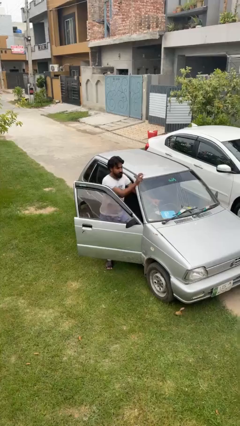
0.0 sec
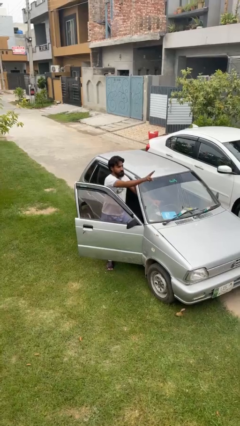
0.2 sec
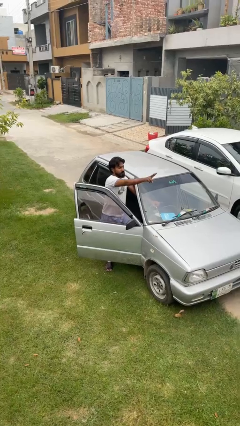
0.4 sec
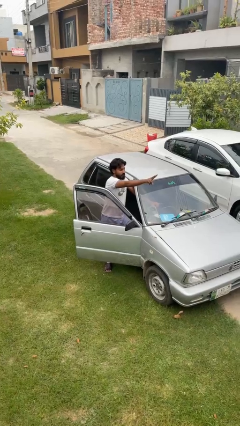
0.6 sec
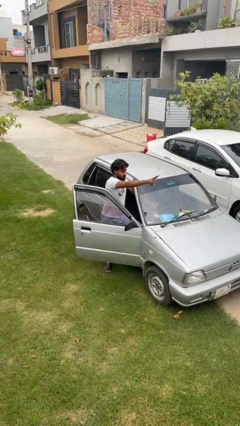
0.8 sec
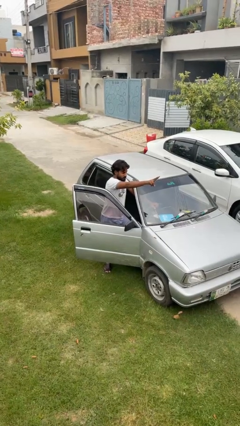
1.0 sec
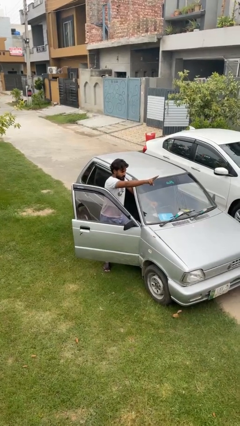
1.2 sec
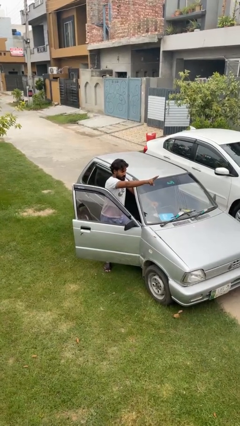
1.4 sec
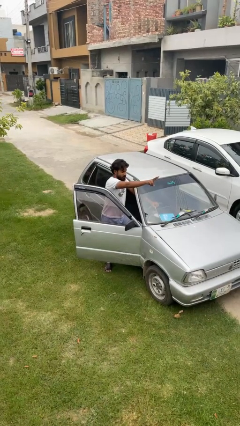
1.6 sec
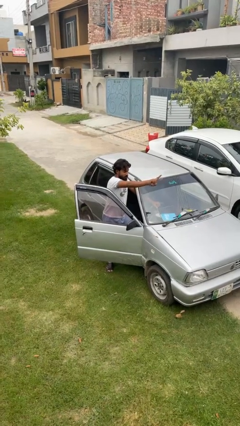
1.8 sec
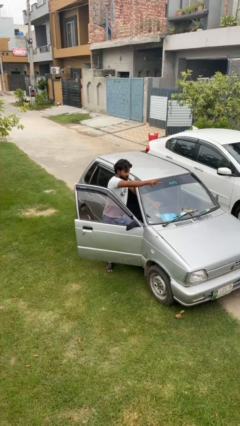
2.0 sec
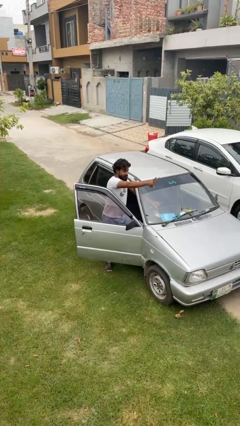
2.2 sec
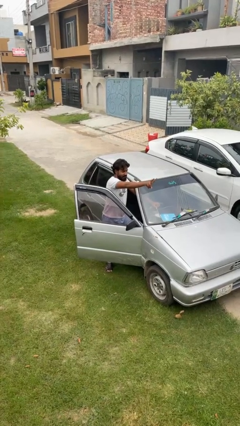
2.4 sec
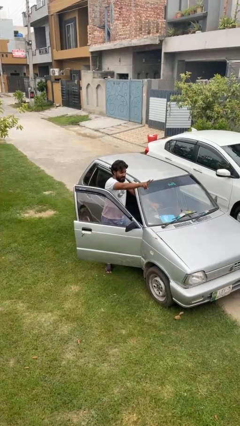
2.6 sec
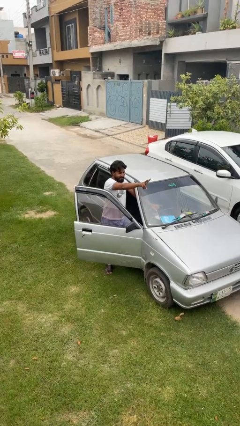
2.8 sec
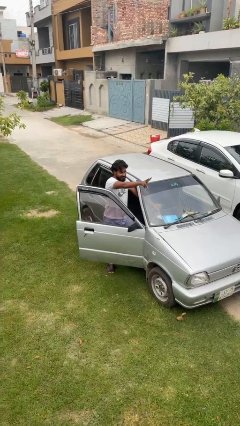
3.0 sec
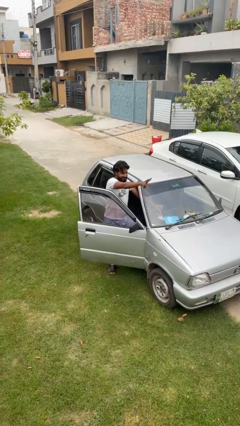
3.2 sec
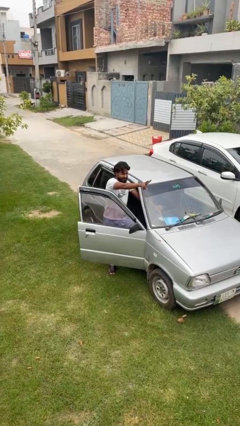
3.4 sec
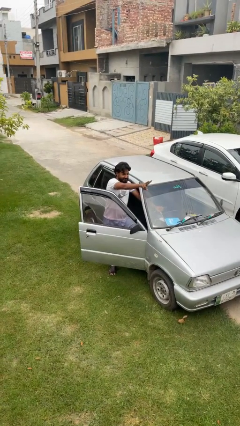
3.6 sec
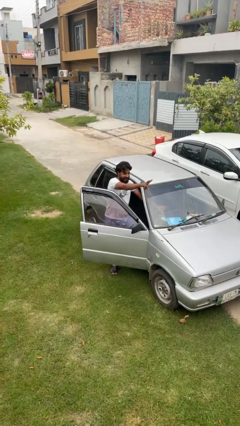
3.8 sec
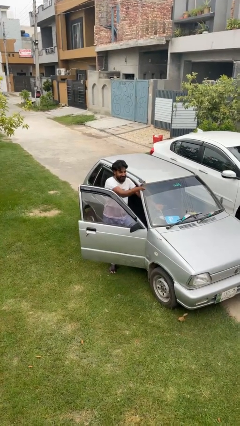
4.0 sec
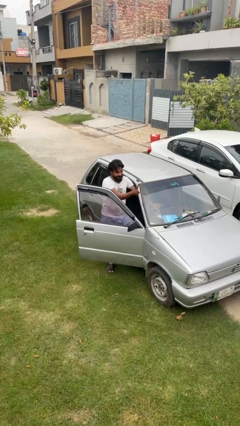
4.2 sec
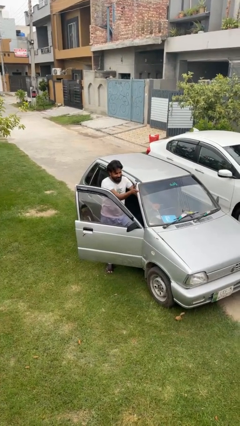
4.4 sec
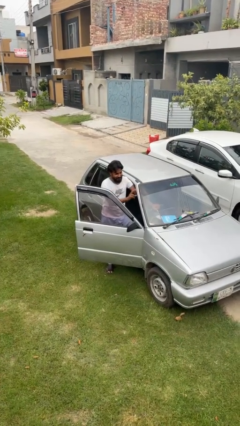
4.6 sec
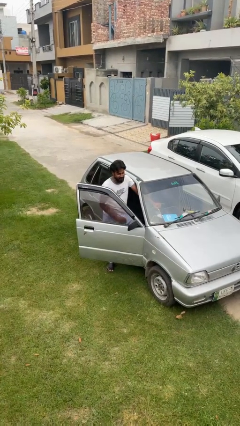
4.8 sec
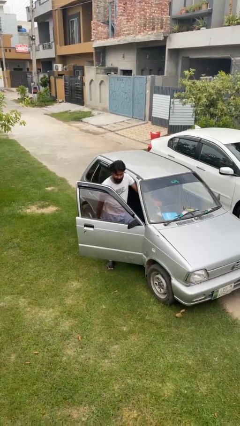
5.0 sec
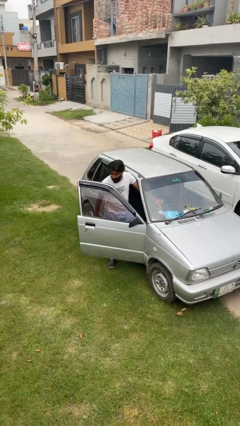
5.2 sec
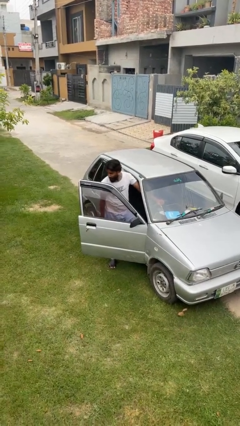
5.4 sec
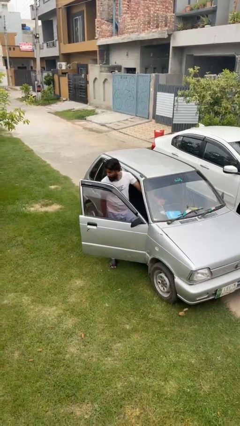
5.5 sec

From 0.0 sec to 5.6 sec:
person gestures peace

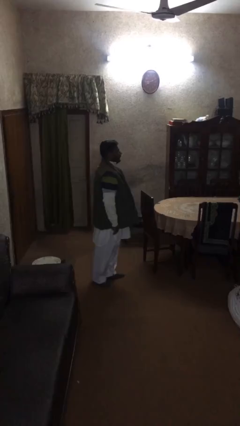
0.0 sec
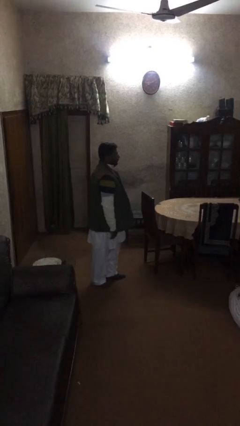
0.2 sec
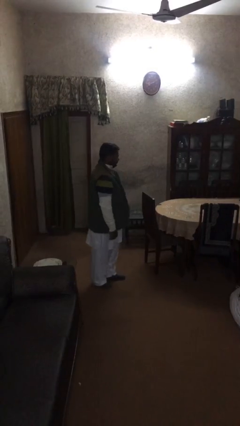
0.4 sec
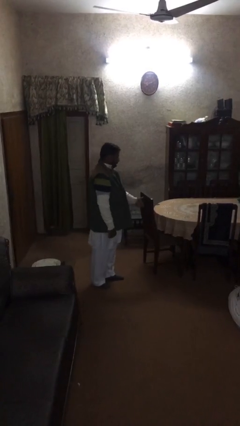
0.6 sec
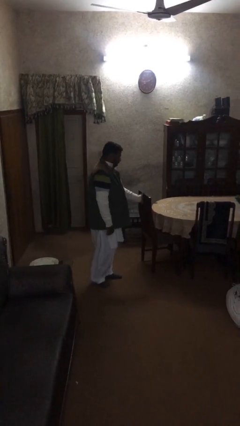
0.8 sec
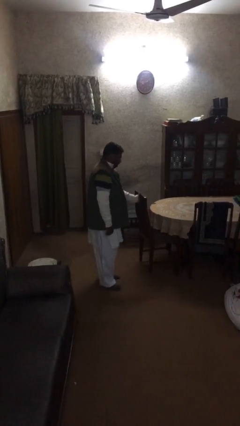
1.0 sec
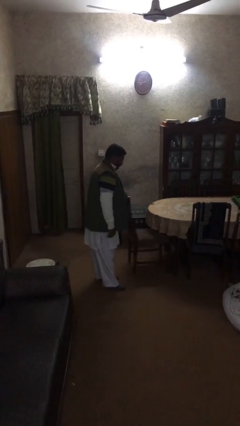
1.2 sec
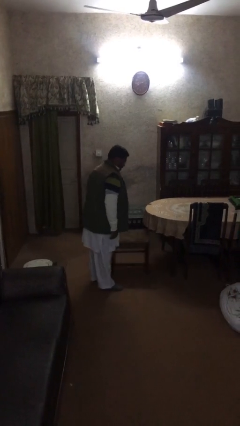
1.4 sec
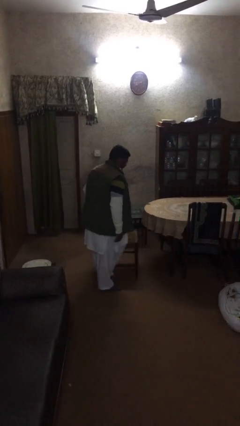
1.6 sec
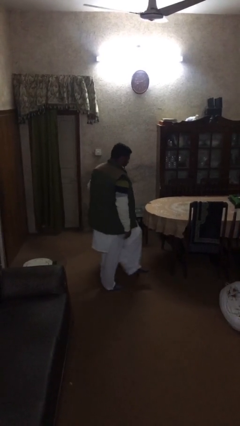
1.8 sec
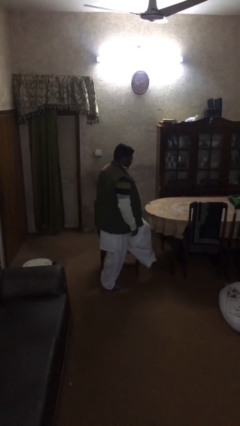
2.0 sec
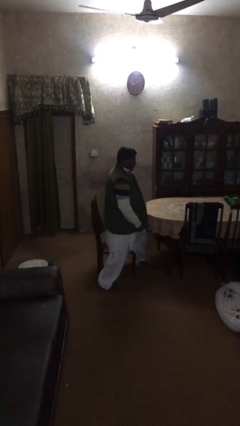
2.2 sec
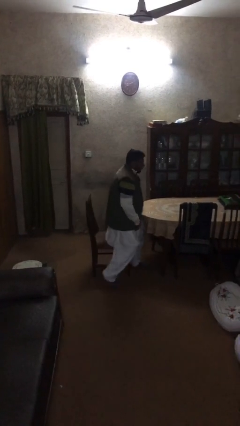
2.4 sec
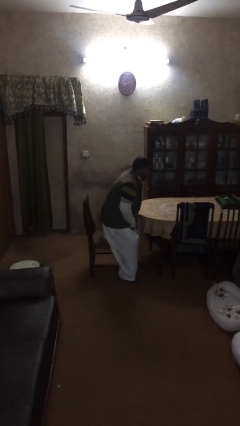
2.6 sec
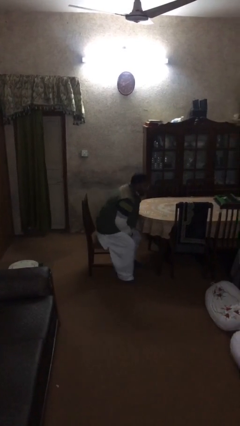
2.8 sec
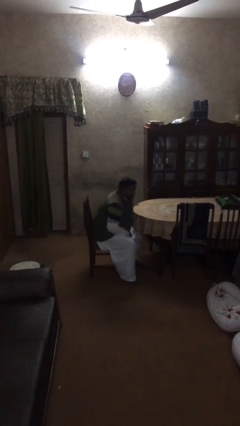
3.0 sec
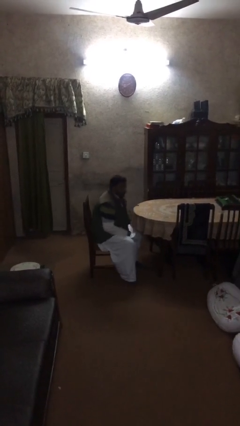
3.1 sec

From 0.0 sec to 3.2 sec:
person sits down

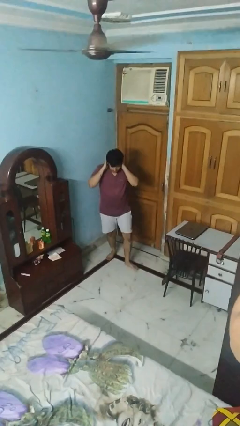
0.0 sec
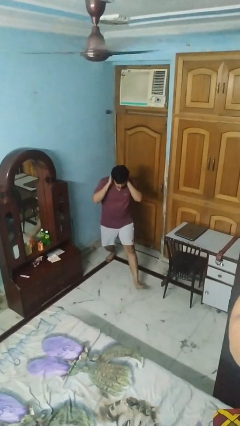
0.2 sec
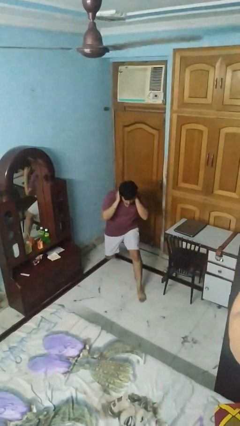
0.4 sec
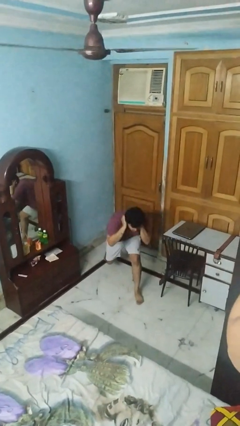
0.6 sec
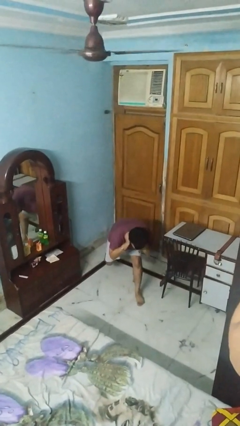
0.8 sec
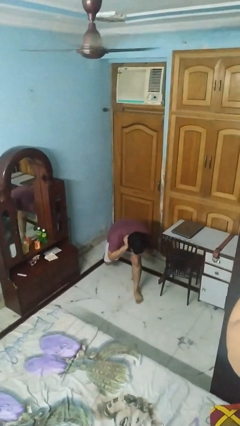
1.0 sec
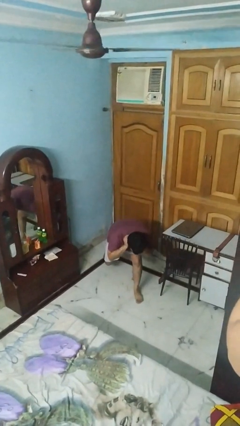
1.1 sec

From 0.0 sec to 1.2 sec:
person exercises with lunges

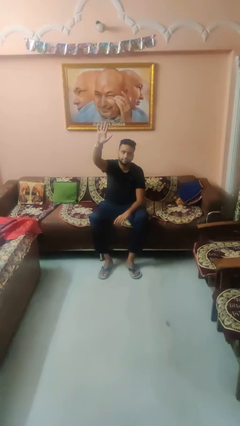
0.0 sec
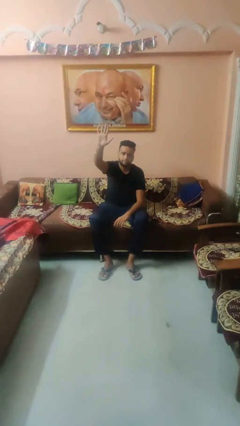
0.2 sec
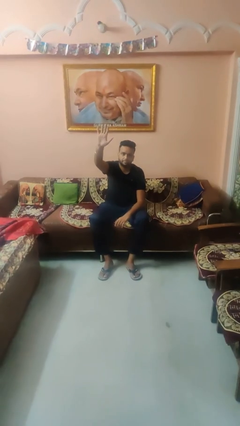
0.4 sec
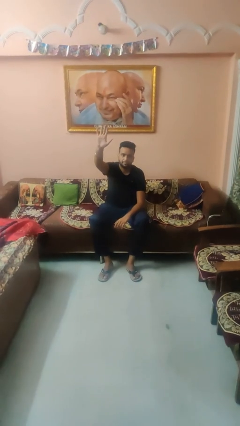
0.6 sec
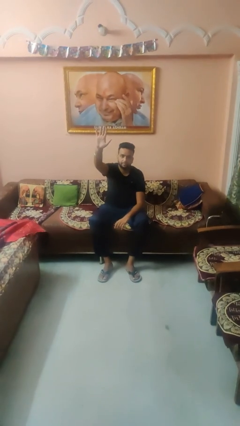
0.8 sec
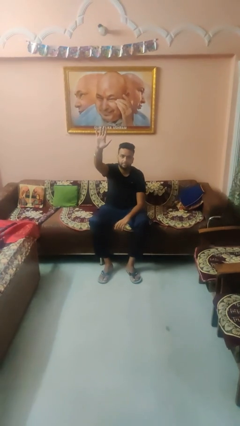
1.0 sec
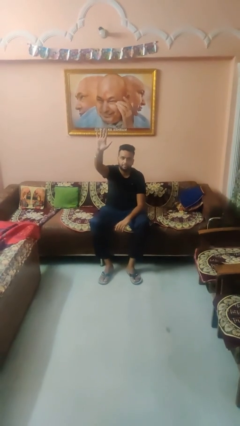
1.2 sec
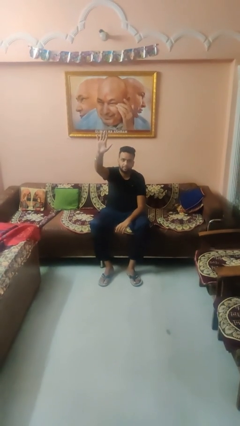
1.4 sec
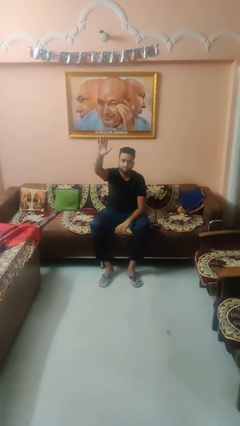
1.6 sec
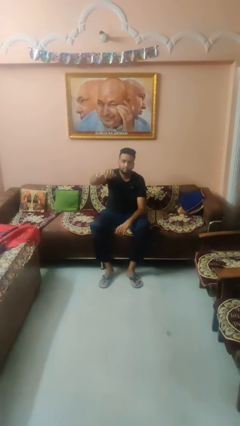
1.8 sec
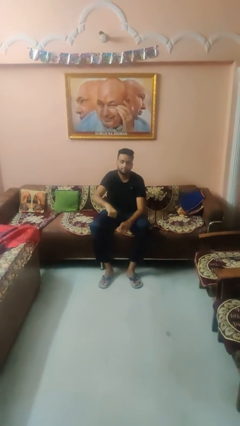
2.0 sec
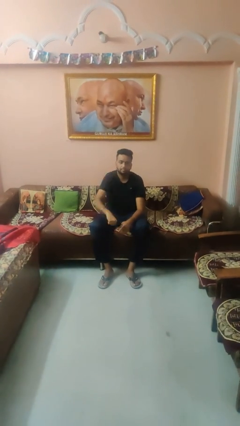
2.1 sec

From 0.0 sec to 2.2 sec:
person gestures number five

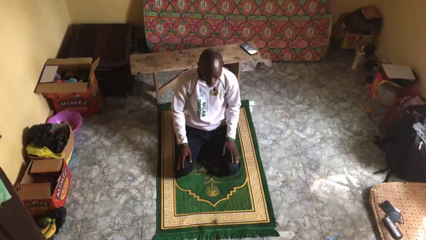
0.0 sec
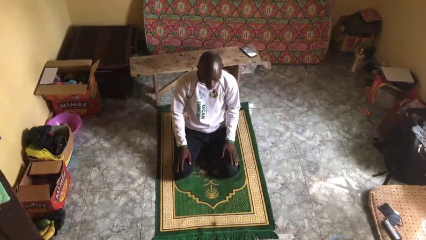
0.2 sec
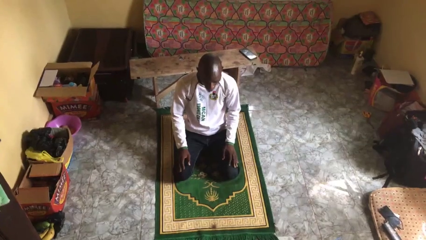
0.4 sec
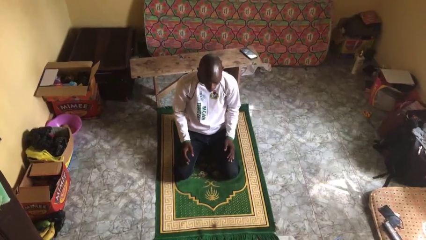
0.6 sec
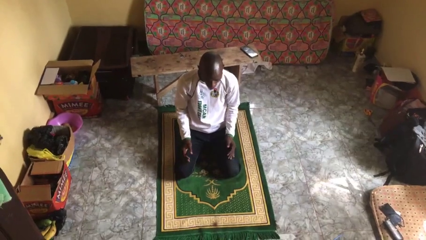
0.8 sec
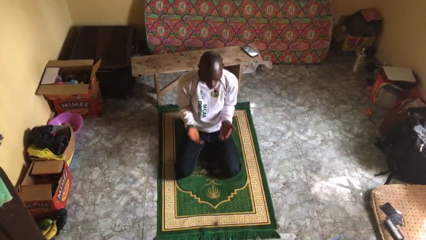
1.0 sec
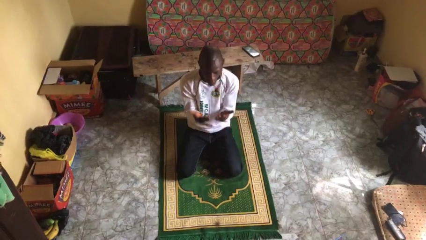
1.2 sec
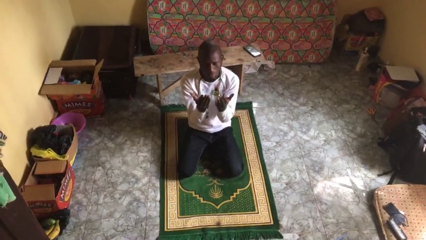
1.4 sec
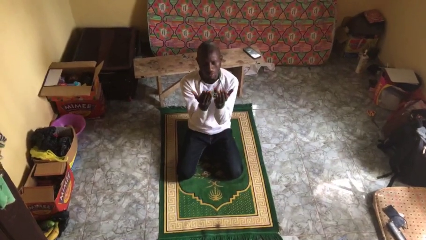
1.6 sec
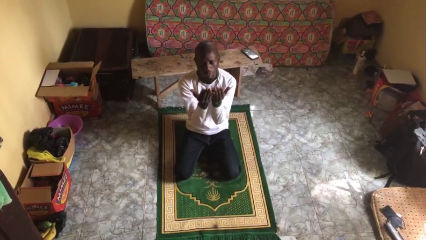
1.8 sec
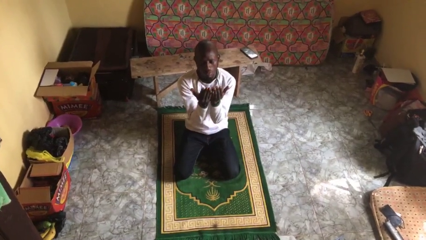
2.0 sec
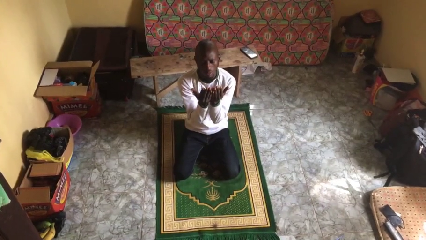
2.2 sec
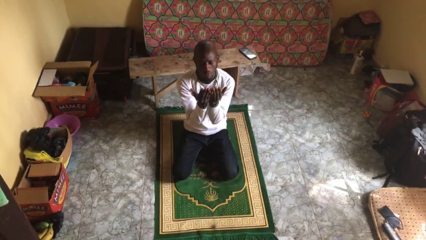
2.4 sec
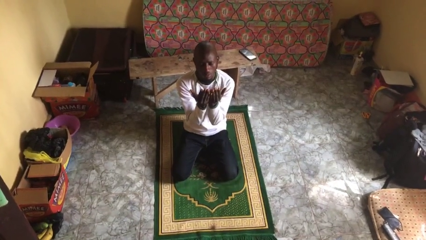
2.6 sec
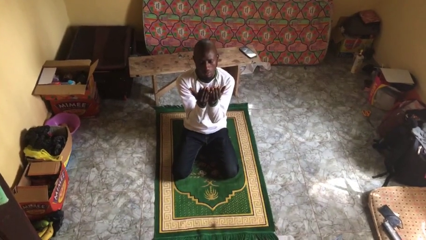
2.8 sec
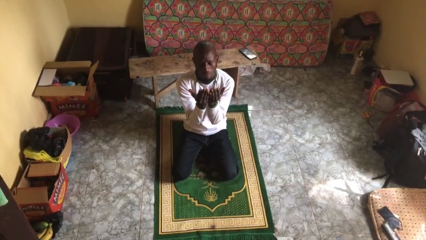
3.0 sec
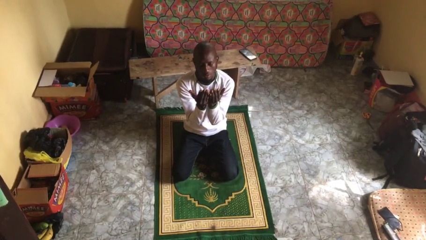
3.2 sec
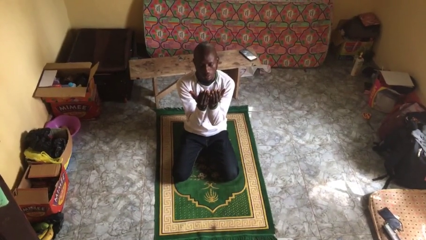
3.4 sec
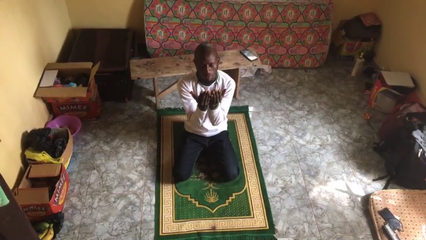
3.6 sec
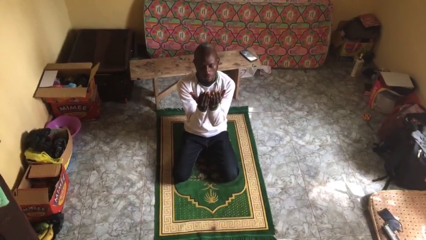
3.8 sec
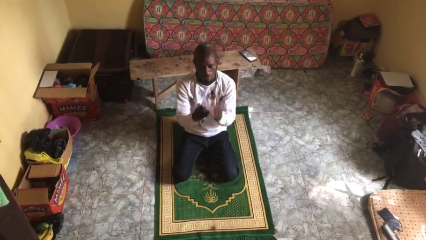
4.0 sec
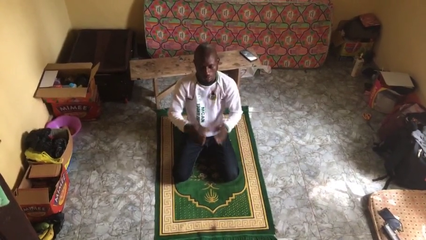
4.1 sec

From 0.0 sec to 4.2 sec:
person prays

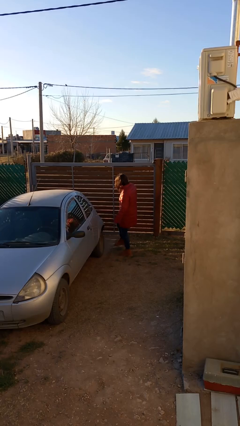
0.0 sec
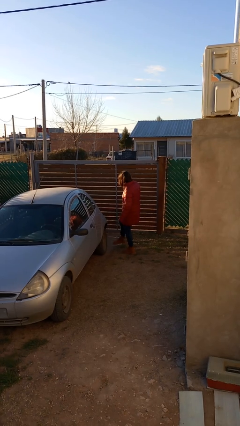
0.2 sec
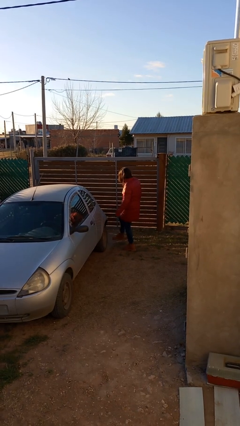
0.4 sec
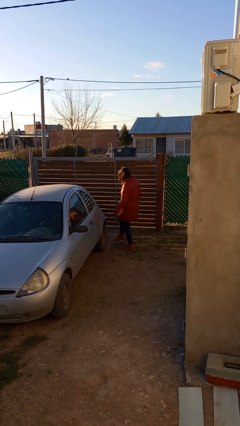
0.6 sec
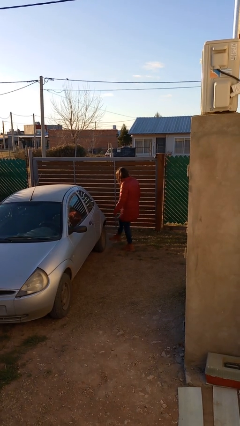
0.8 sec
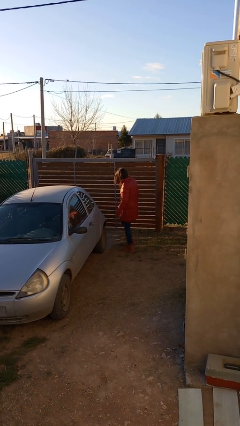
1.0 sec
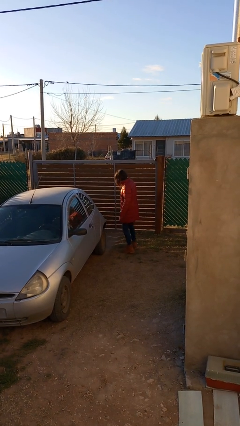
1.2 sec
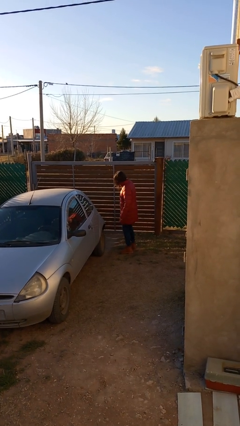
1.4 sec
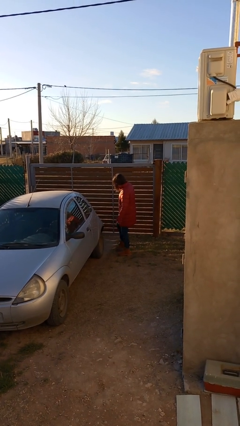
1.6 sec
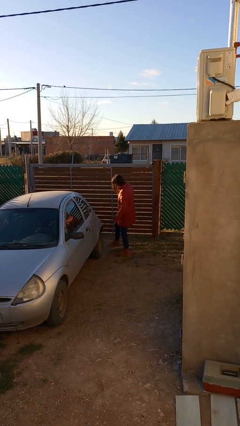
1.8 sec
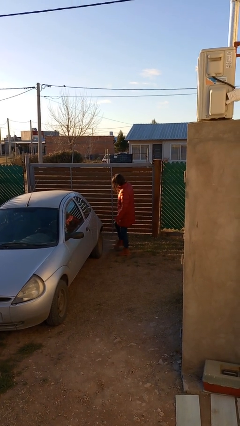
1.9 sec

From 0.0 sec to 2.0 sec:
person kicks car tires
